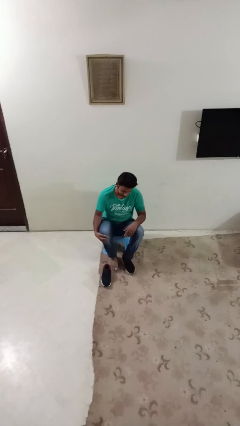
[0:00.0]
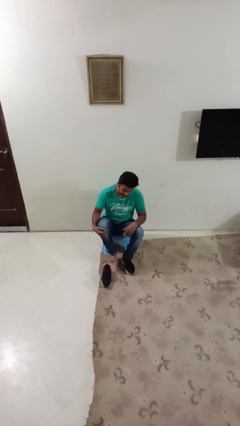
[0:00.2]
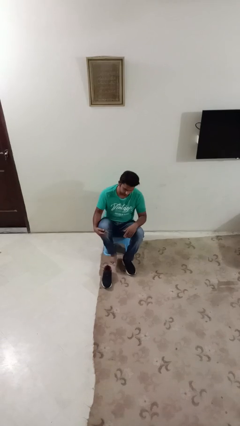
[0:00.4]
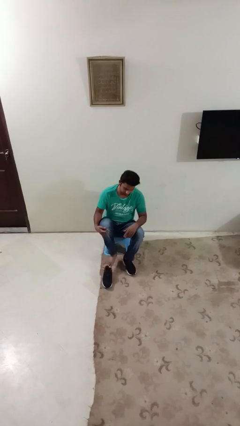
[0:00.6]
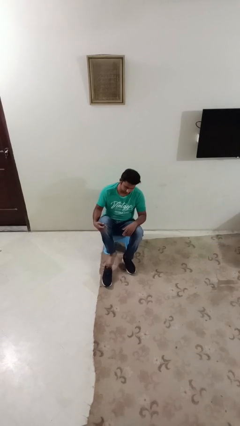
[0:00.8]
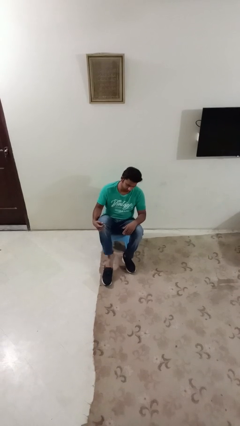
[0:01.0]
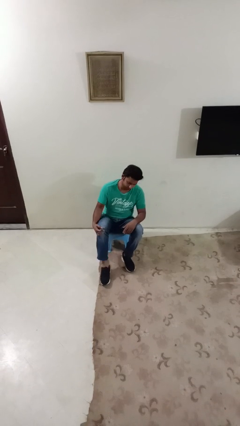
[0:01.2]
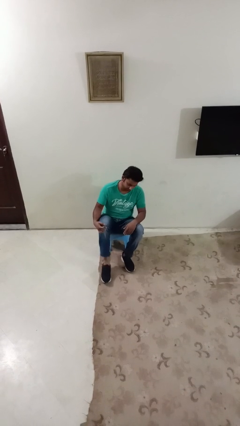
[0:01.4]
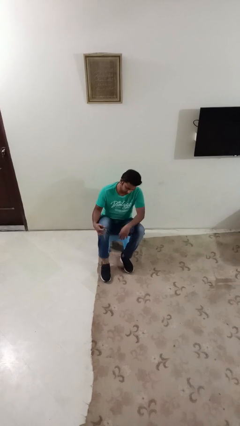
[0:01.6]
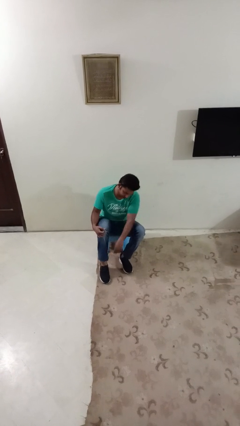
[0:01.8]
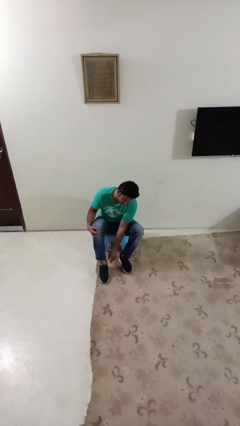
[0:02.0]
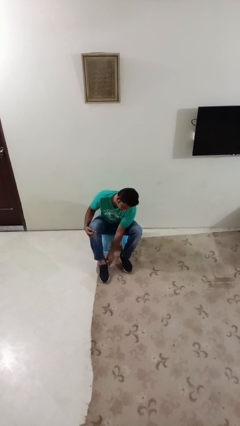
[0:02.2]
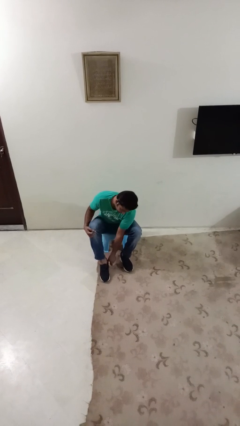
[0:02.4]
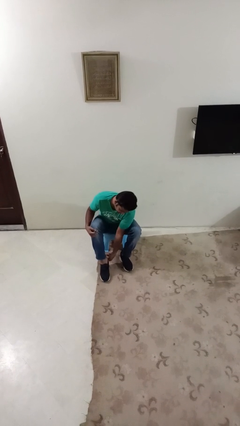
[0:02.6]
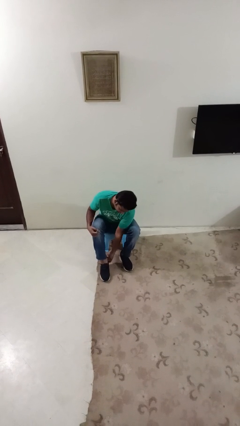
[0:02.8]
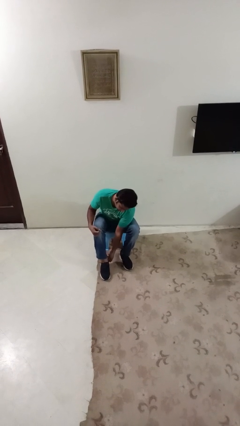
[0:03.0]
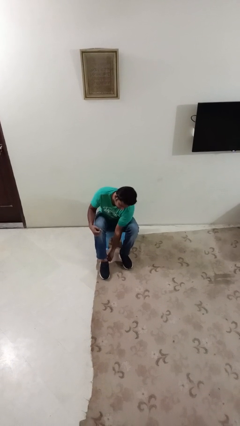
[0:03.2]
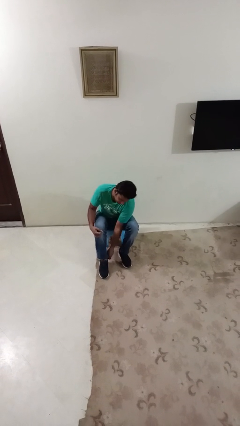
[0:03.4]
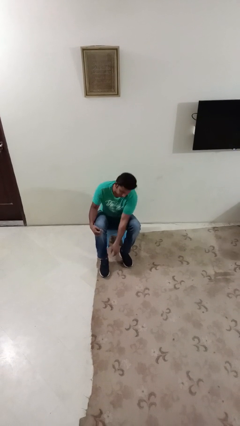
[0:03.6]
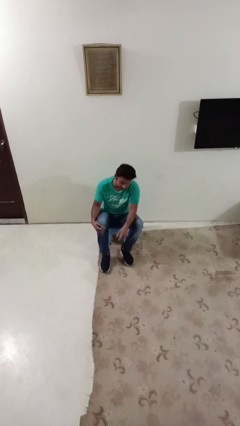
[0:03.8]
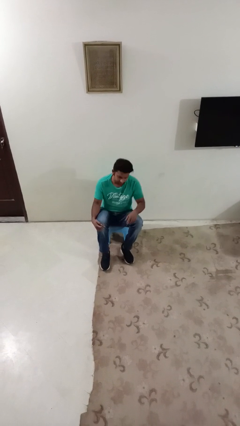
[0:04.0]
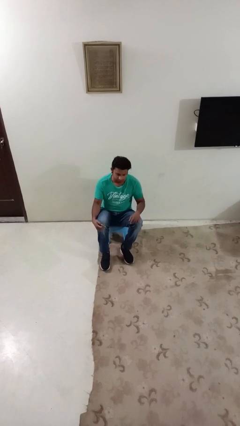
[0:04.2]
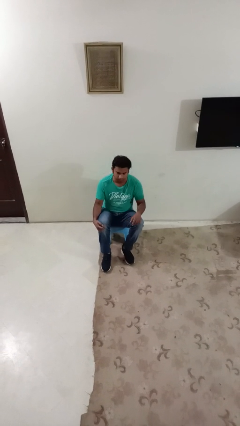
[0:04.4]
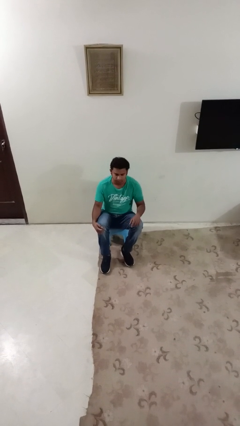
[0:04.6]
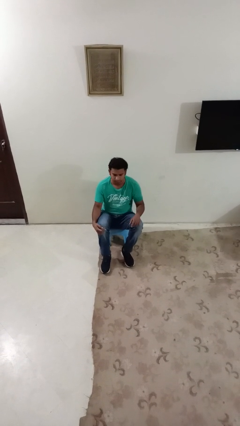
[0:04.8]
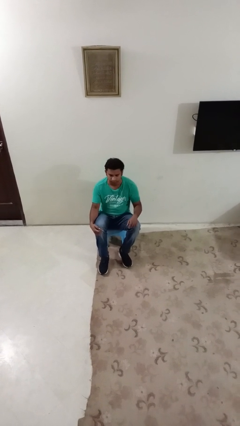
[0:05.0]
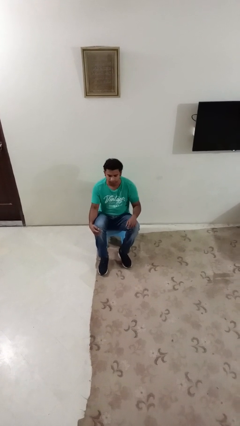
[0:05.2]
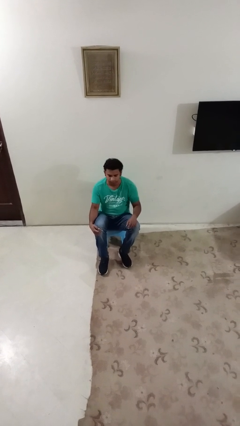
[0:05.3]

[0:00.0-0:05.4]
person puts on shoes

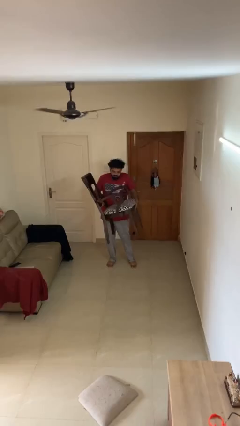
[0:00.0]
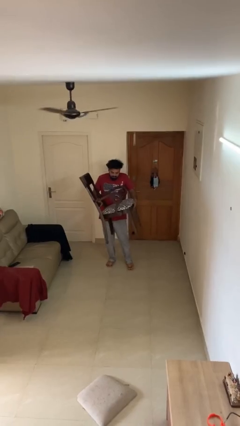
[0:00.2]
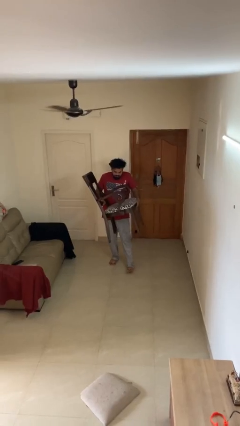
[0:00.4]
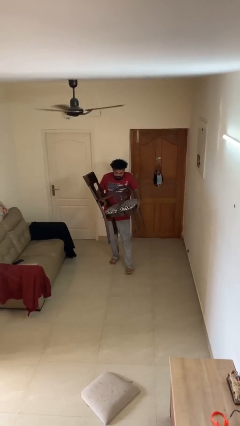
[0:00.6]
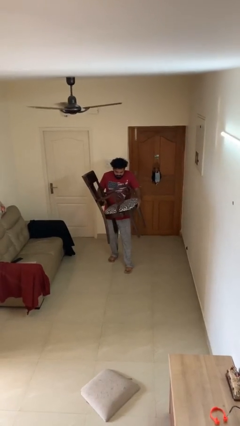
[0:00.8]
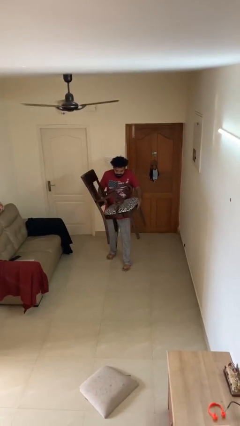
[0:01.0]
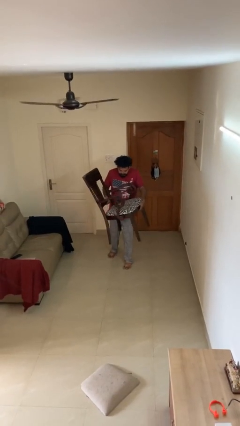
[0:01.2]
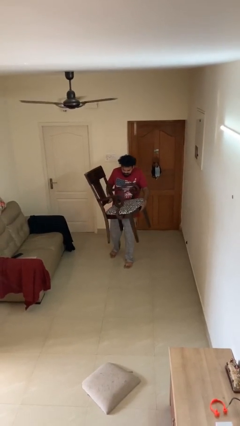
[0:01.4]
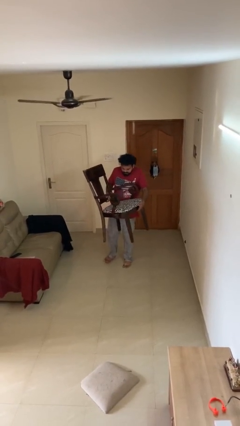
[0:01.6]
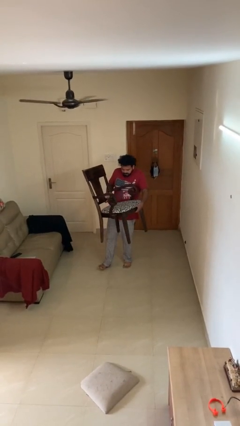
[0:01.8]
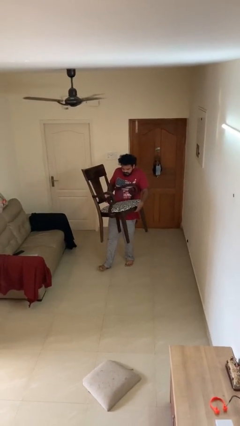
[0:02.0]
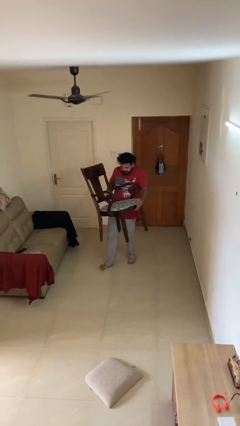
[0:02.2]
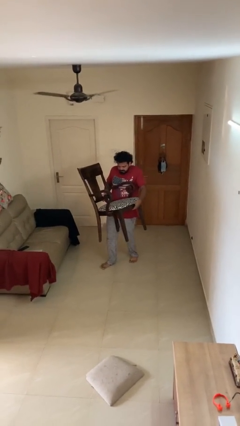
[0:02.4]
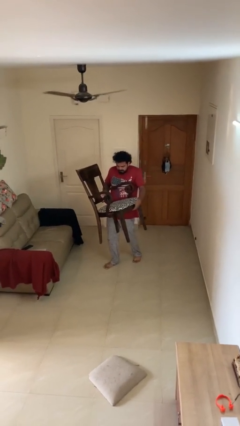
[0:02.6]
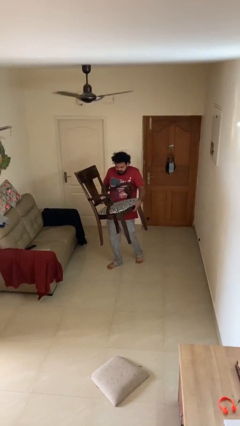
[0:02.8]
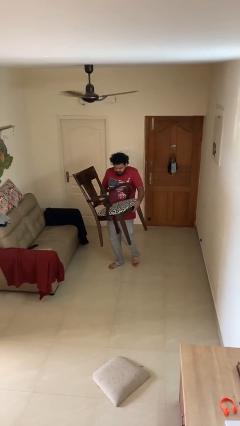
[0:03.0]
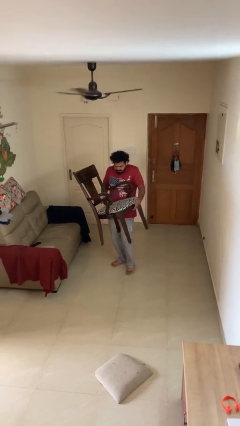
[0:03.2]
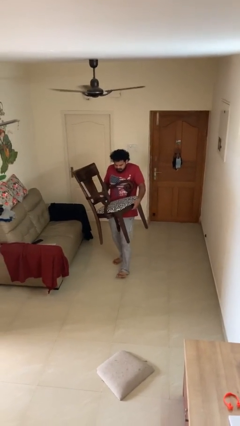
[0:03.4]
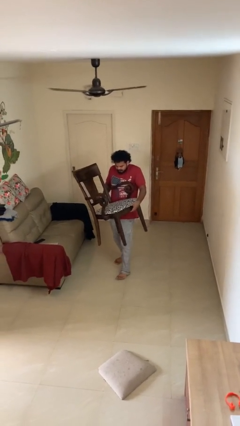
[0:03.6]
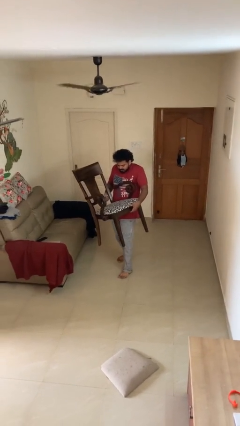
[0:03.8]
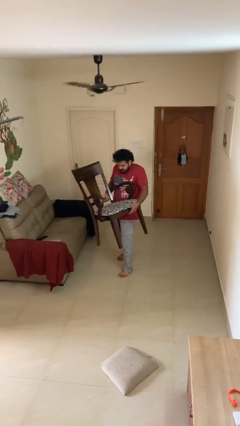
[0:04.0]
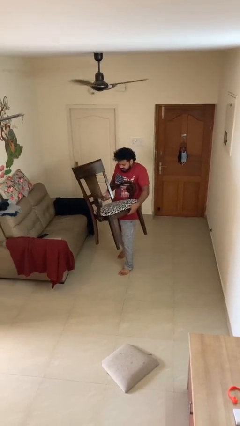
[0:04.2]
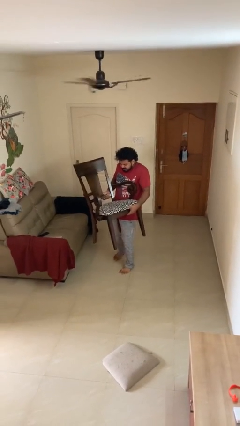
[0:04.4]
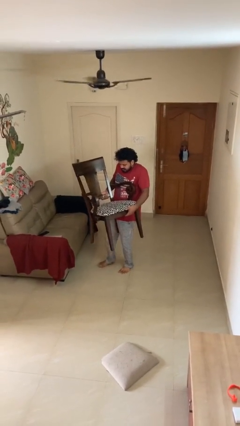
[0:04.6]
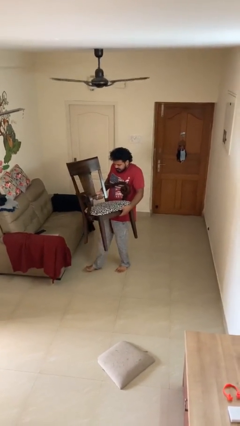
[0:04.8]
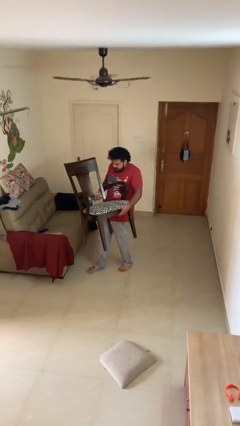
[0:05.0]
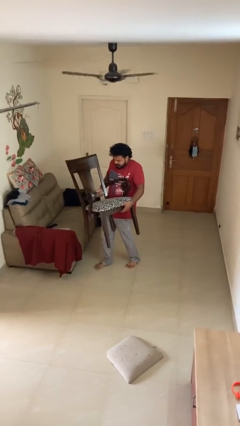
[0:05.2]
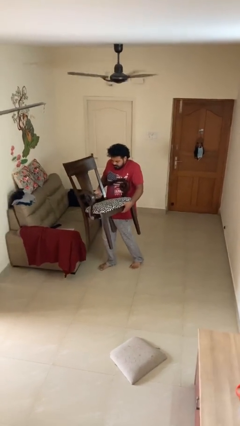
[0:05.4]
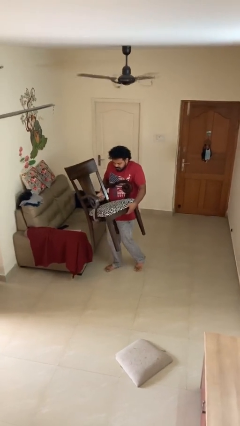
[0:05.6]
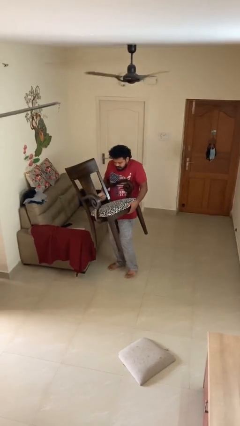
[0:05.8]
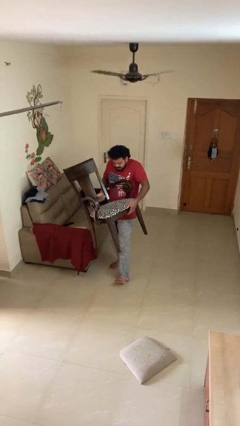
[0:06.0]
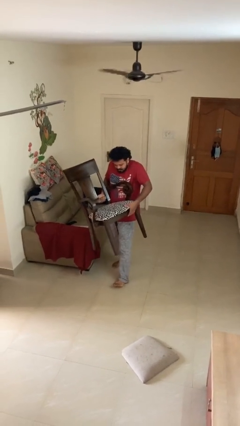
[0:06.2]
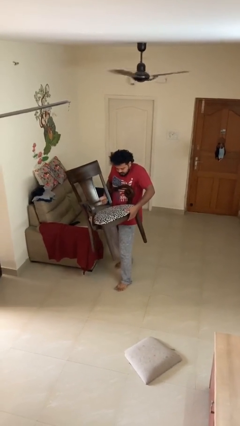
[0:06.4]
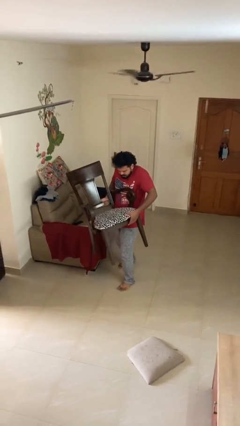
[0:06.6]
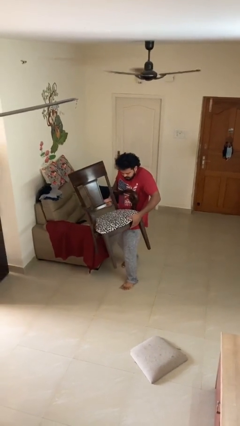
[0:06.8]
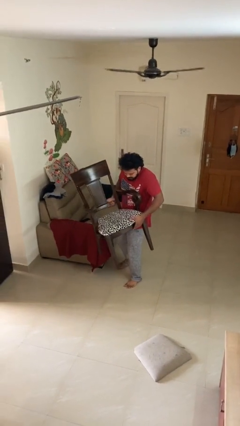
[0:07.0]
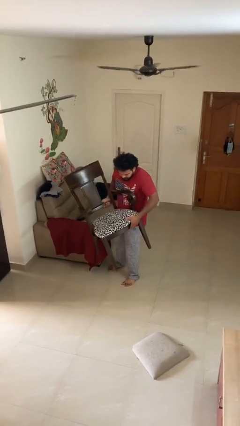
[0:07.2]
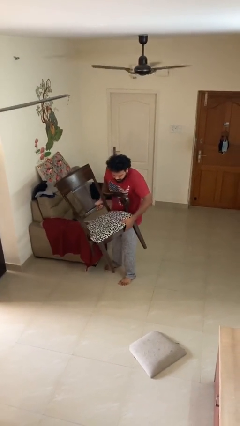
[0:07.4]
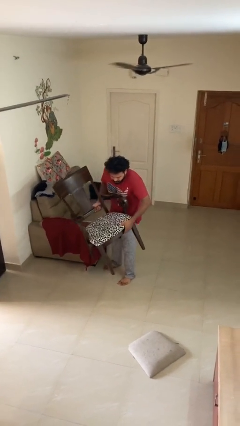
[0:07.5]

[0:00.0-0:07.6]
person carries heavy object

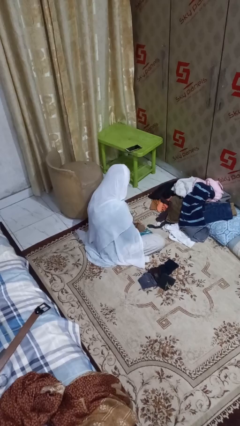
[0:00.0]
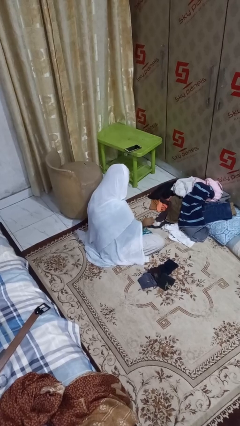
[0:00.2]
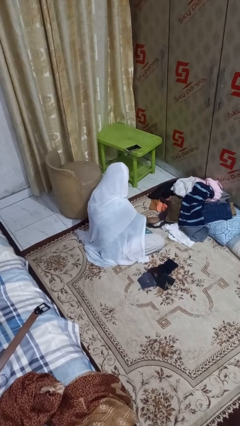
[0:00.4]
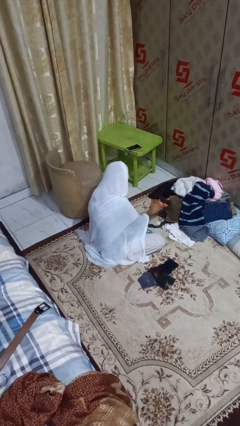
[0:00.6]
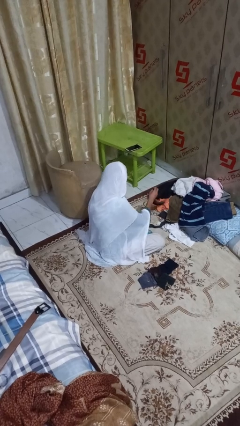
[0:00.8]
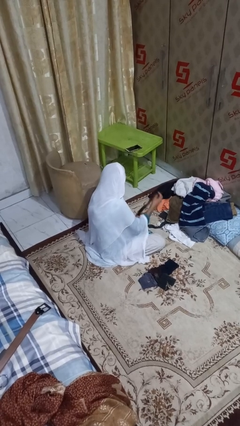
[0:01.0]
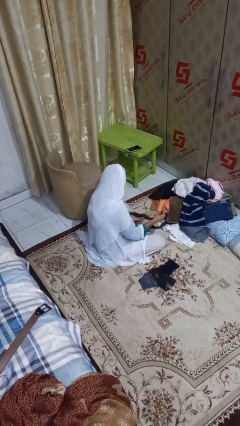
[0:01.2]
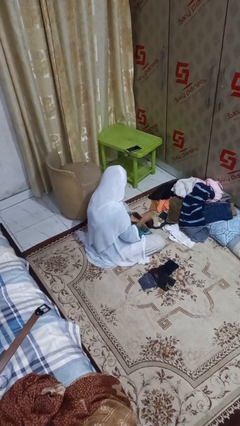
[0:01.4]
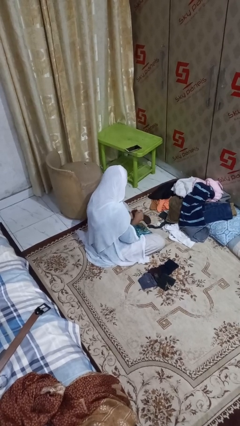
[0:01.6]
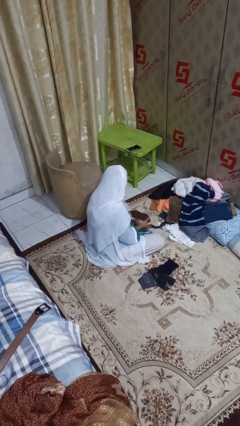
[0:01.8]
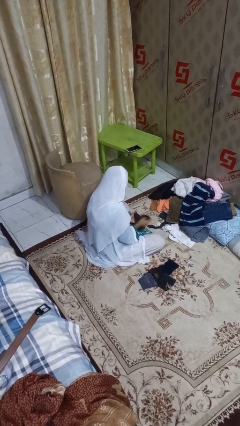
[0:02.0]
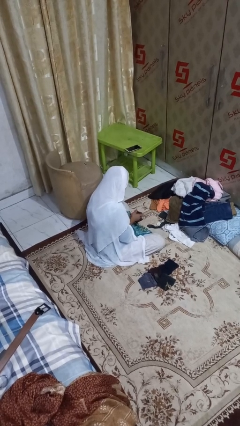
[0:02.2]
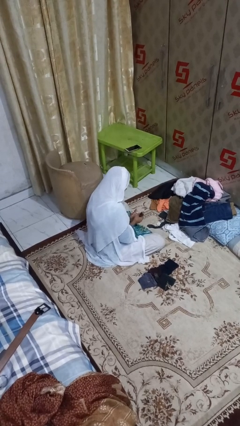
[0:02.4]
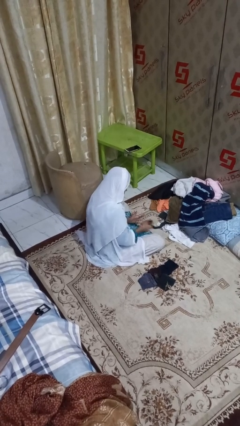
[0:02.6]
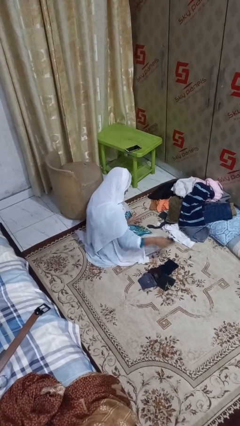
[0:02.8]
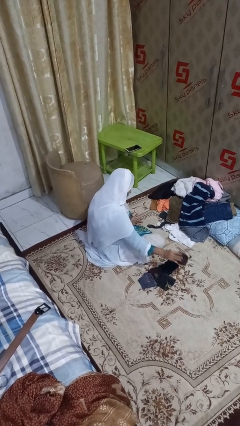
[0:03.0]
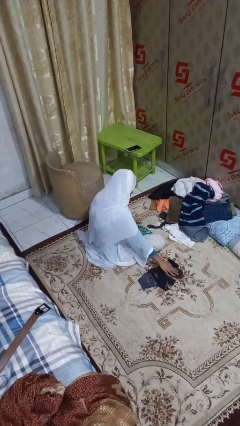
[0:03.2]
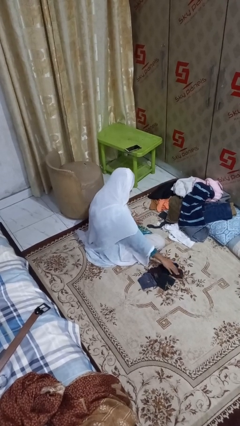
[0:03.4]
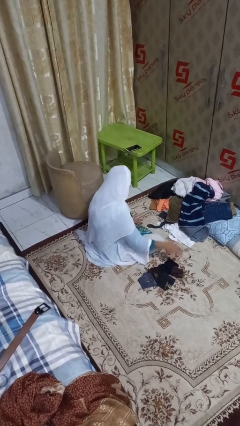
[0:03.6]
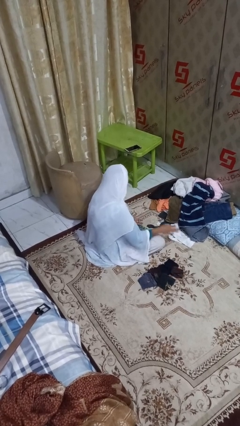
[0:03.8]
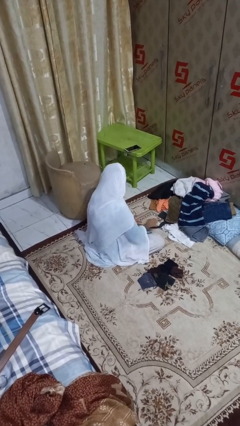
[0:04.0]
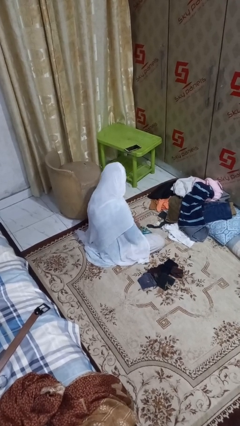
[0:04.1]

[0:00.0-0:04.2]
person folds socks

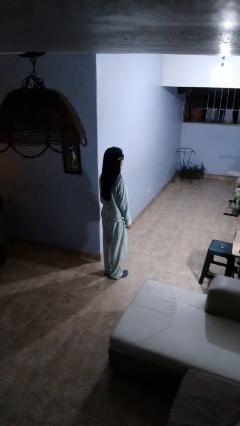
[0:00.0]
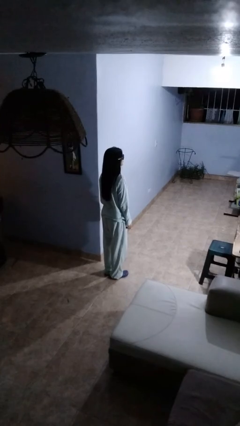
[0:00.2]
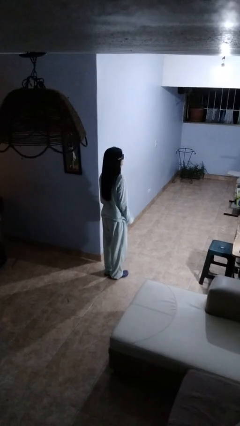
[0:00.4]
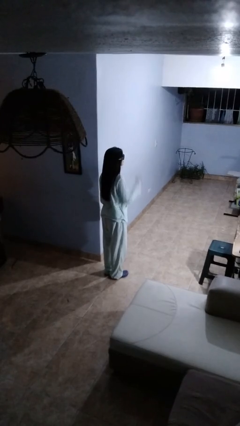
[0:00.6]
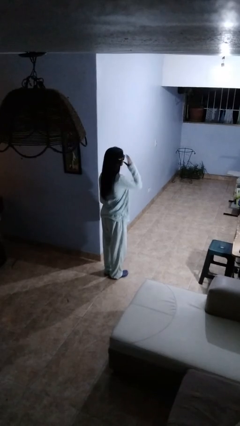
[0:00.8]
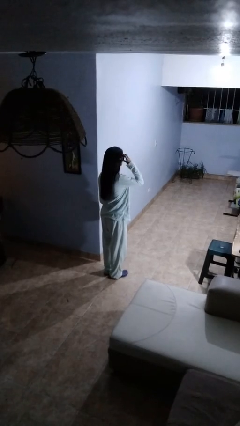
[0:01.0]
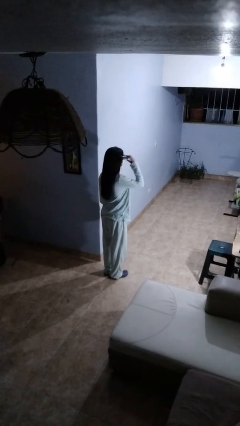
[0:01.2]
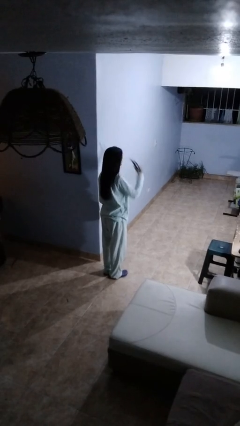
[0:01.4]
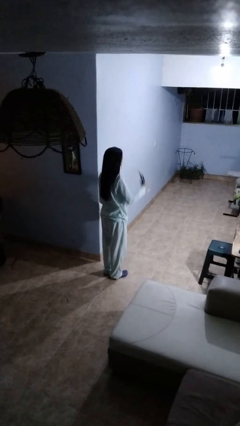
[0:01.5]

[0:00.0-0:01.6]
person takes off sunglasses
